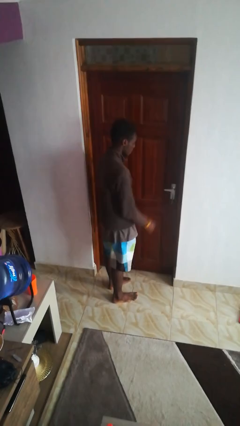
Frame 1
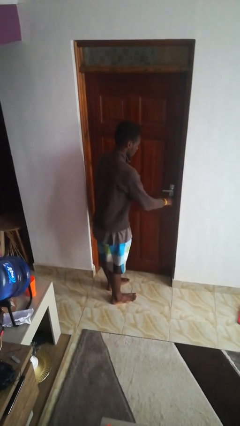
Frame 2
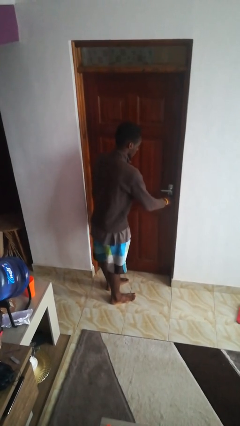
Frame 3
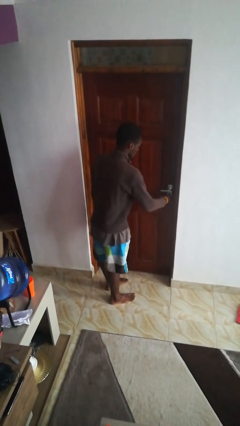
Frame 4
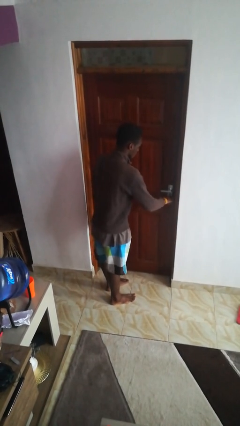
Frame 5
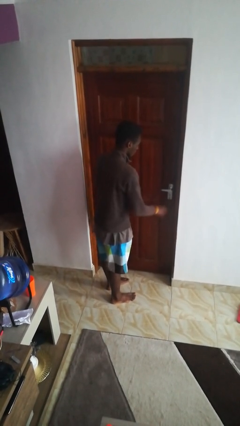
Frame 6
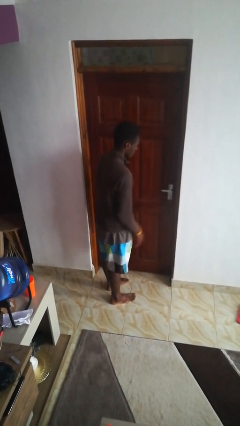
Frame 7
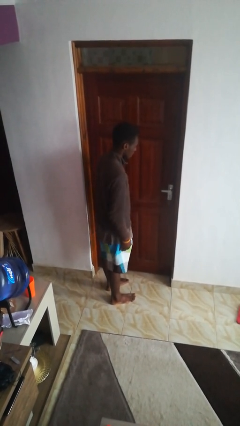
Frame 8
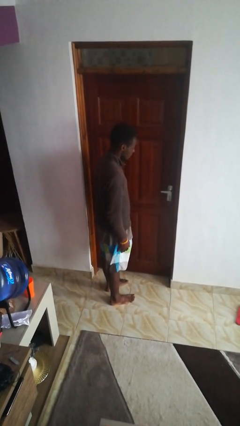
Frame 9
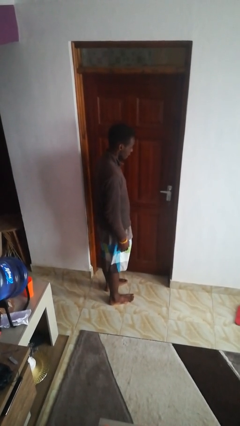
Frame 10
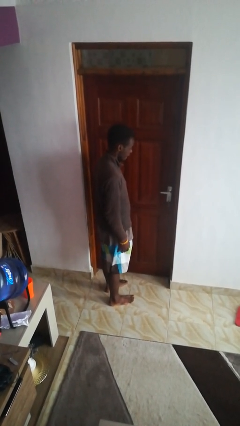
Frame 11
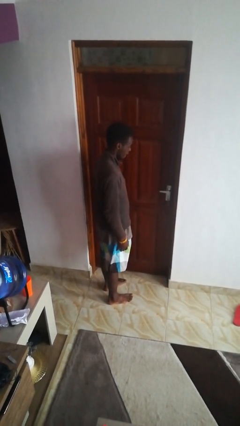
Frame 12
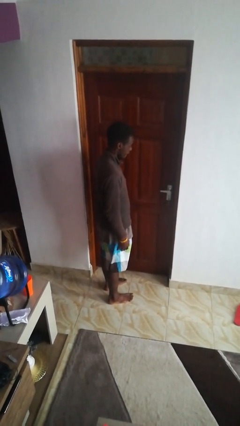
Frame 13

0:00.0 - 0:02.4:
person unlocks door with keys

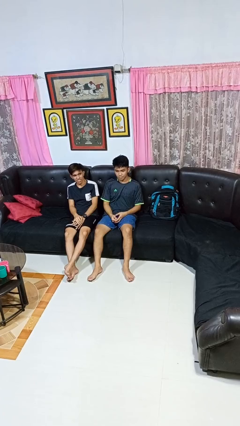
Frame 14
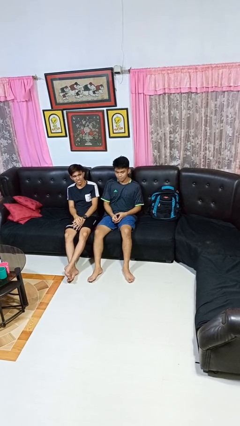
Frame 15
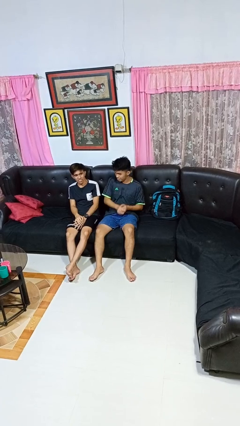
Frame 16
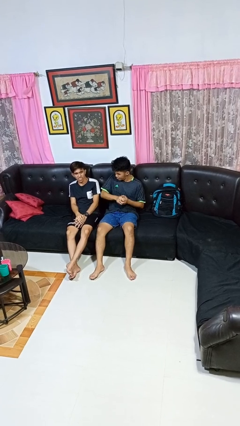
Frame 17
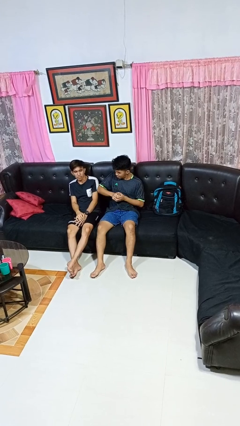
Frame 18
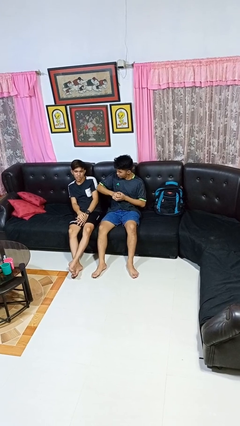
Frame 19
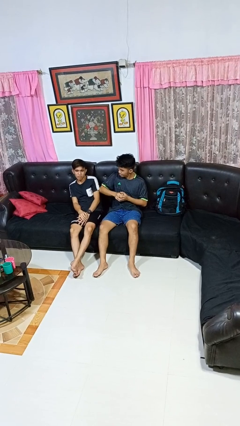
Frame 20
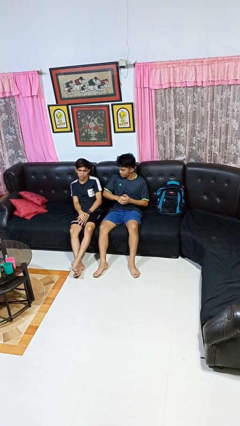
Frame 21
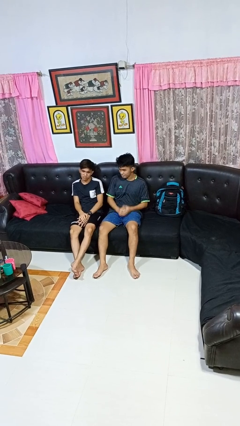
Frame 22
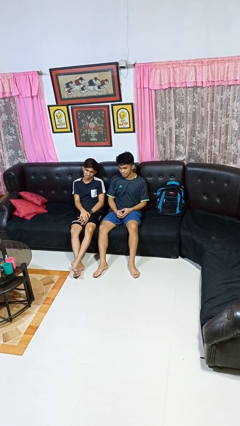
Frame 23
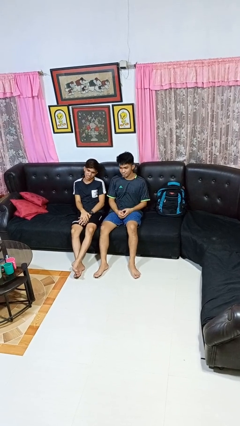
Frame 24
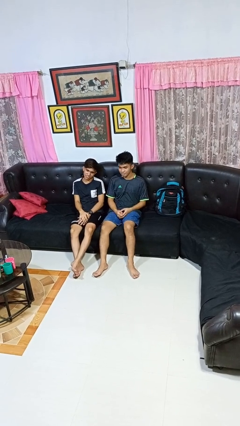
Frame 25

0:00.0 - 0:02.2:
person nudges person with elbow

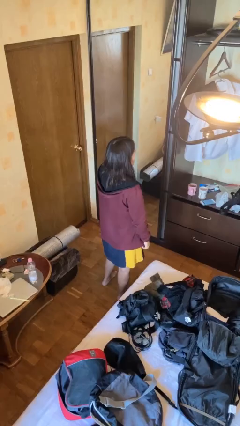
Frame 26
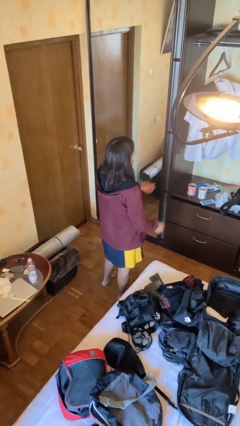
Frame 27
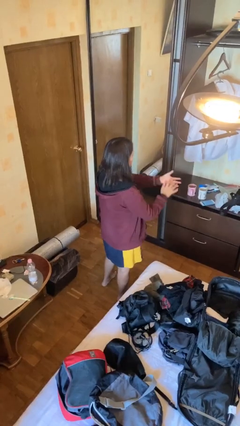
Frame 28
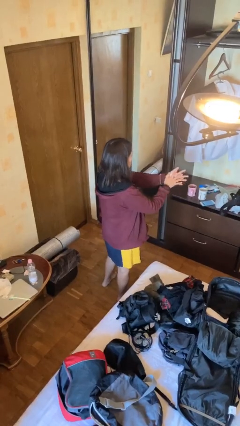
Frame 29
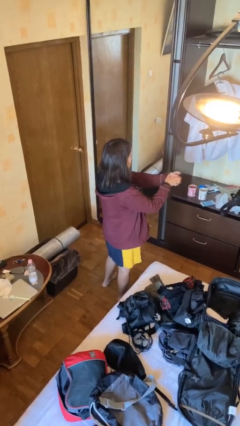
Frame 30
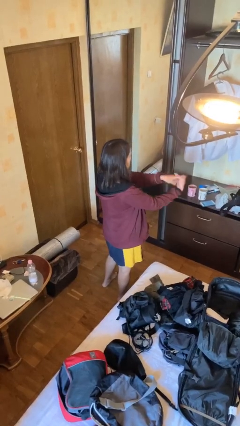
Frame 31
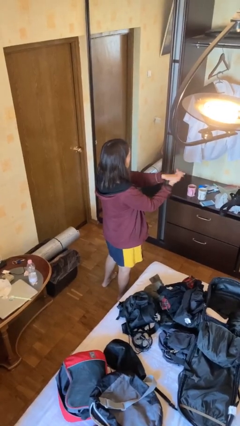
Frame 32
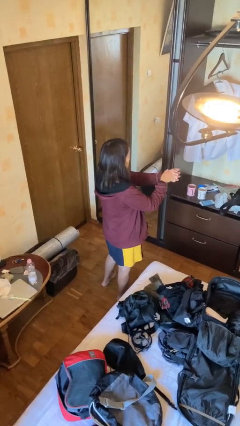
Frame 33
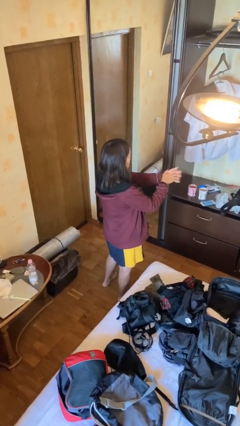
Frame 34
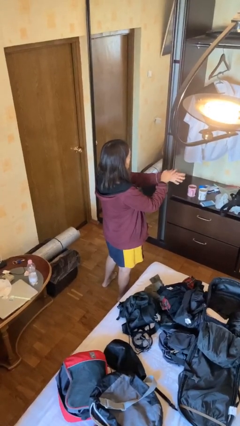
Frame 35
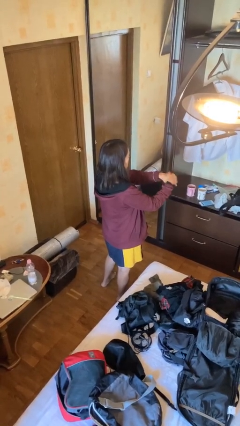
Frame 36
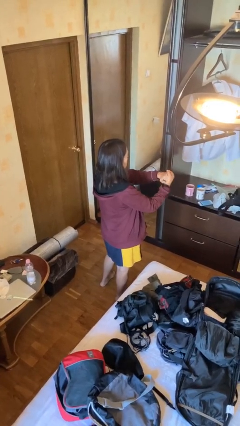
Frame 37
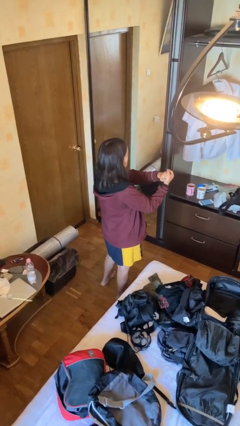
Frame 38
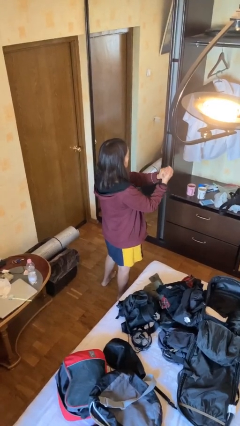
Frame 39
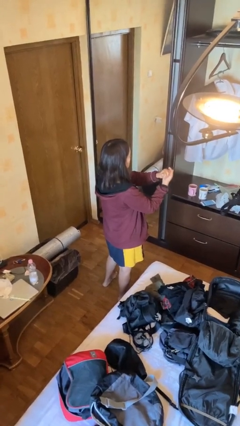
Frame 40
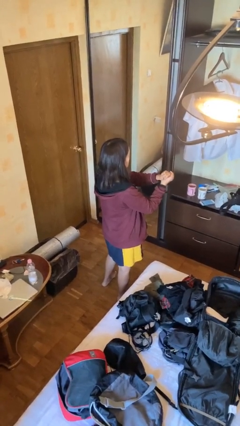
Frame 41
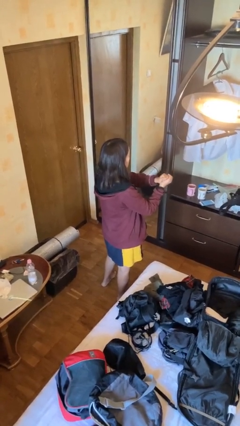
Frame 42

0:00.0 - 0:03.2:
person cracks knuckles

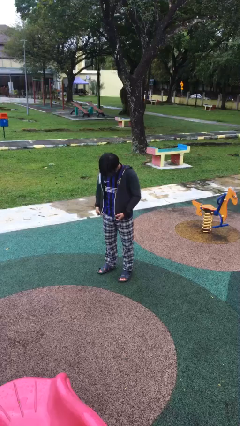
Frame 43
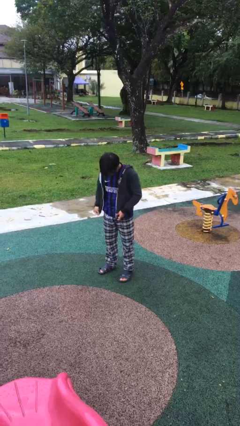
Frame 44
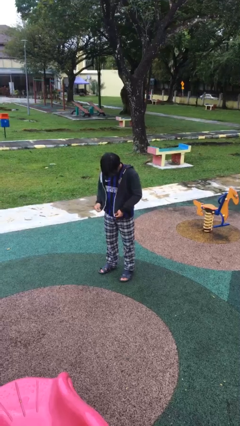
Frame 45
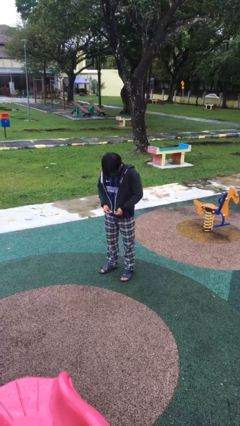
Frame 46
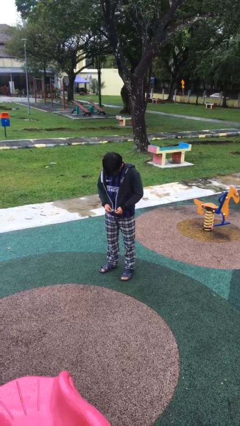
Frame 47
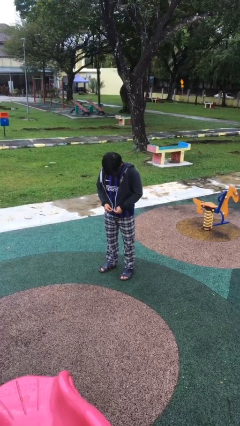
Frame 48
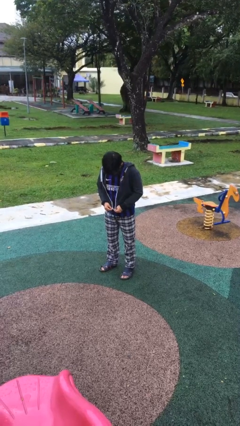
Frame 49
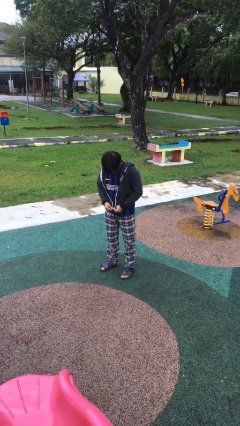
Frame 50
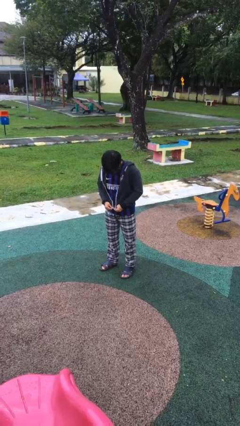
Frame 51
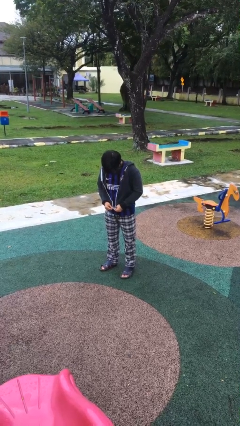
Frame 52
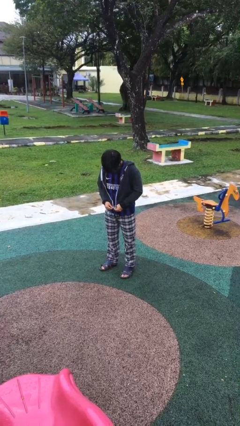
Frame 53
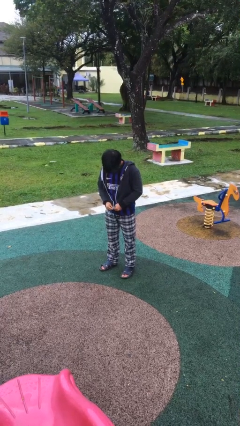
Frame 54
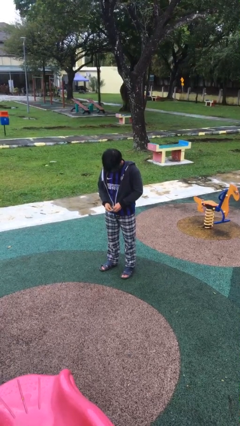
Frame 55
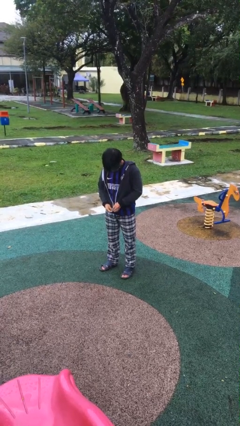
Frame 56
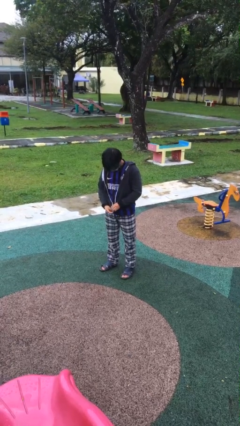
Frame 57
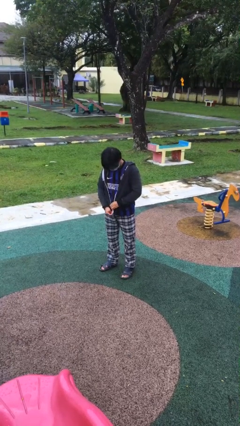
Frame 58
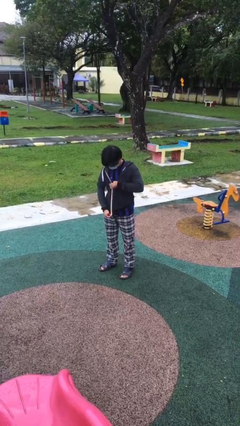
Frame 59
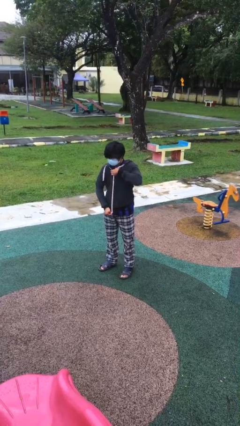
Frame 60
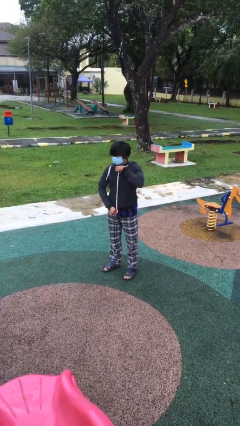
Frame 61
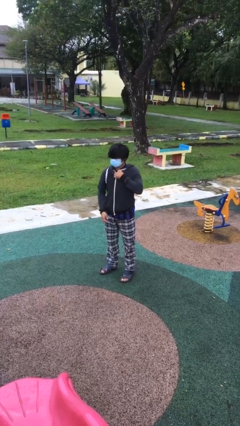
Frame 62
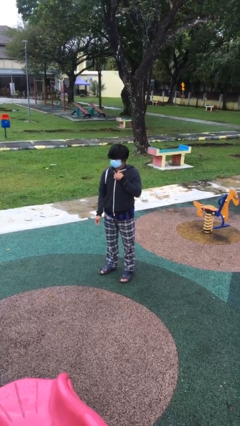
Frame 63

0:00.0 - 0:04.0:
person zips up jacket

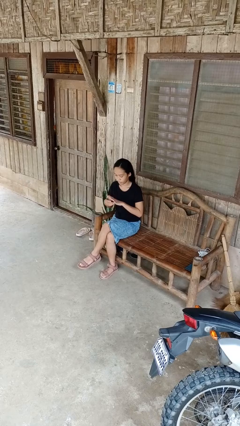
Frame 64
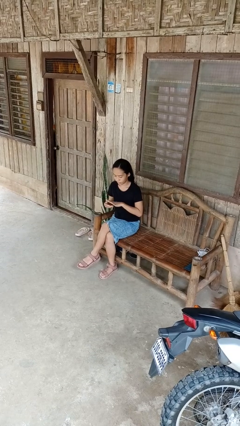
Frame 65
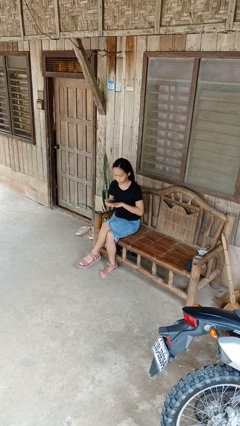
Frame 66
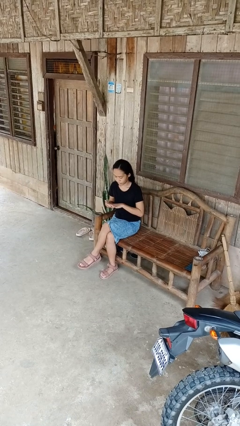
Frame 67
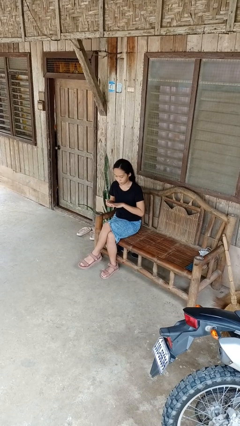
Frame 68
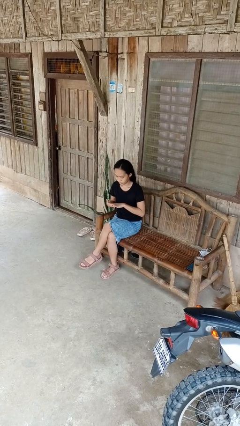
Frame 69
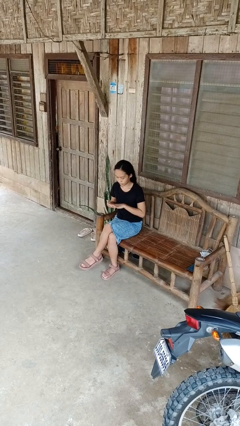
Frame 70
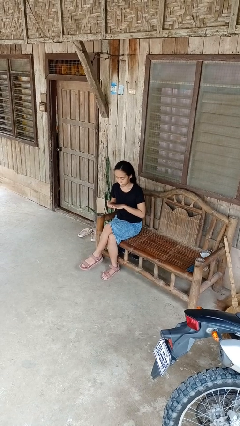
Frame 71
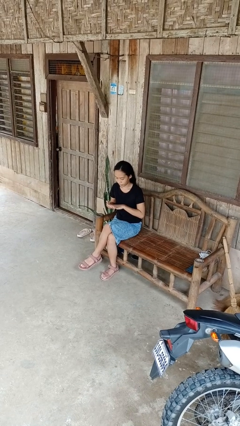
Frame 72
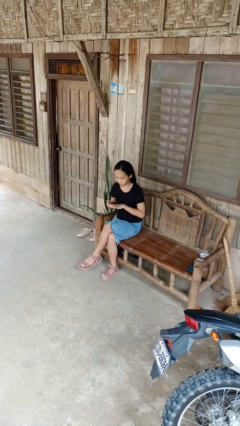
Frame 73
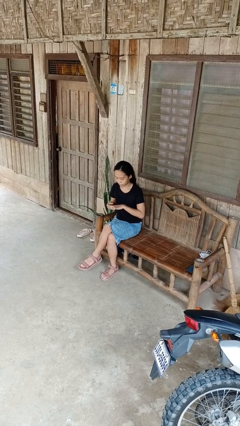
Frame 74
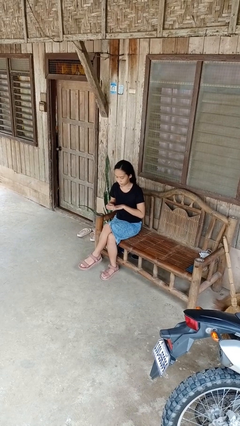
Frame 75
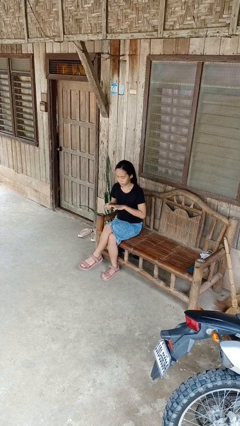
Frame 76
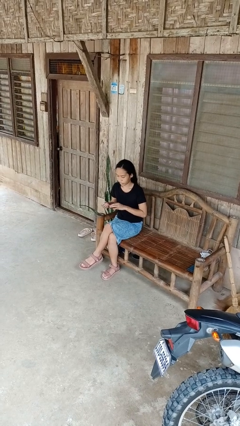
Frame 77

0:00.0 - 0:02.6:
person puts on ring

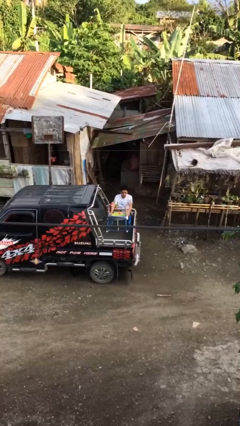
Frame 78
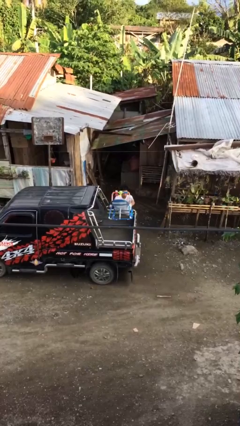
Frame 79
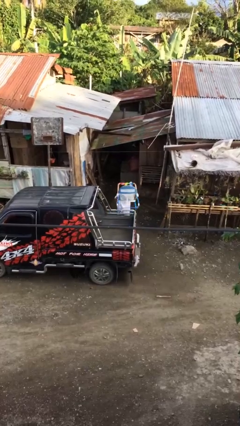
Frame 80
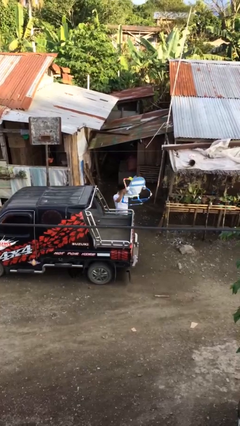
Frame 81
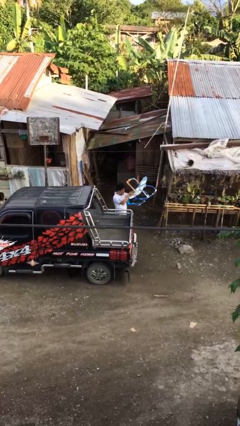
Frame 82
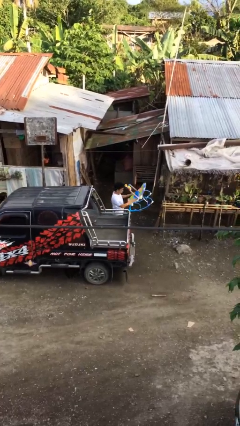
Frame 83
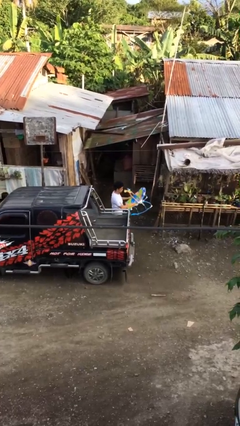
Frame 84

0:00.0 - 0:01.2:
person unloads car

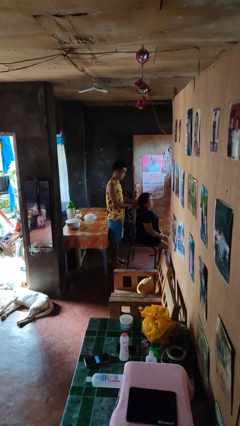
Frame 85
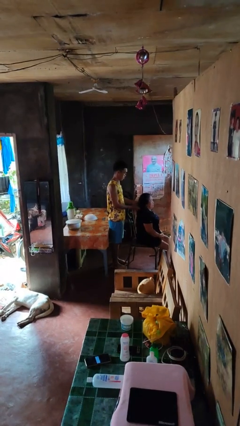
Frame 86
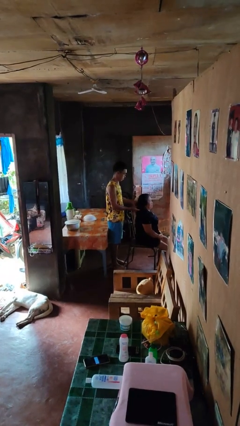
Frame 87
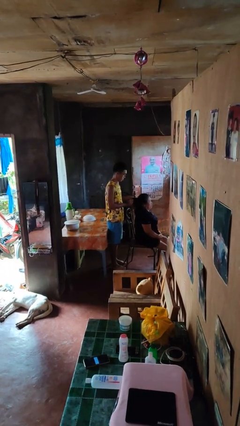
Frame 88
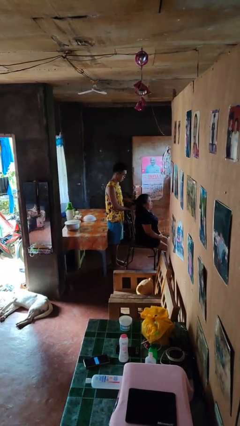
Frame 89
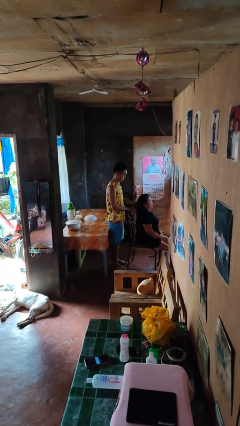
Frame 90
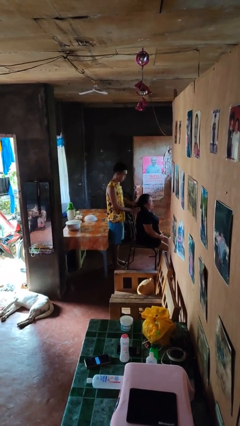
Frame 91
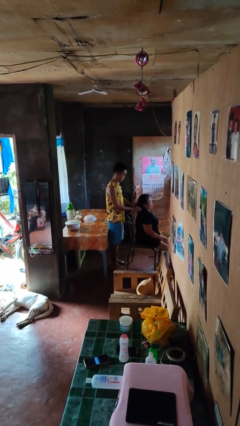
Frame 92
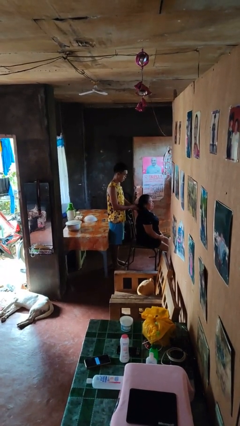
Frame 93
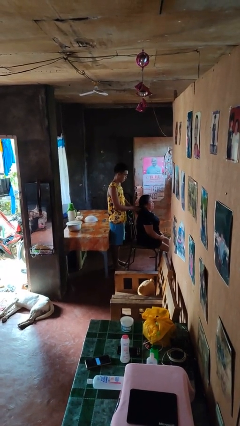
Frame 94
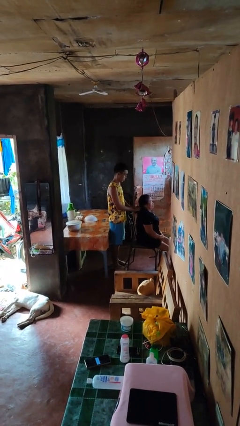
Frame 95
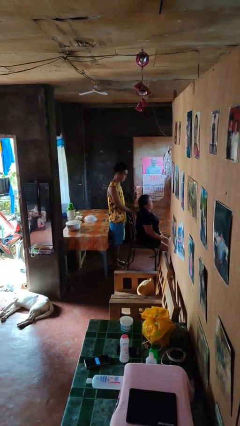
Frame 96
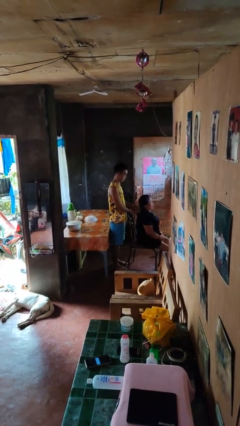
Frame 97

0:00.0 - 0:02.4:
person braids hair of person
